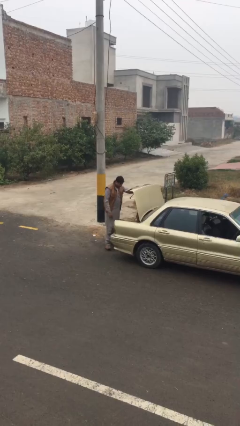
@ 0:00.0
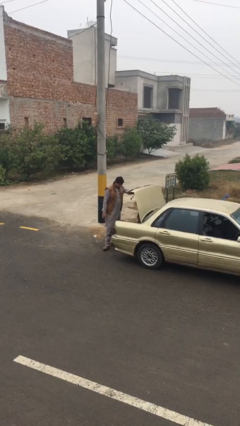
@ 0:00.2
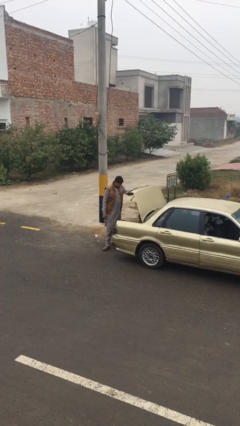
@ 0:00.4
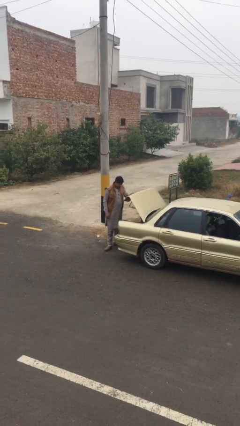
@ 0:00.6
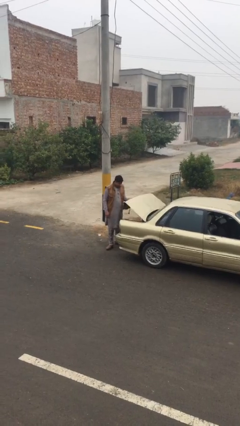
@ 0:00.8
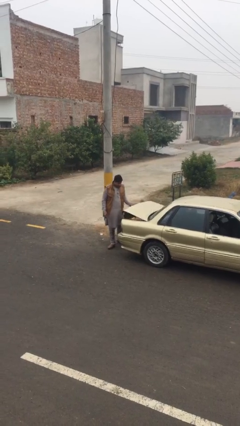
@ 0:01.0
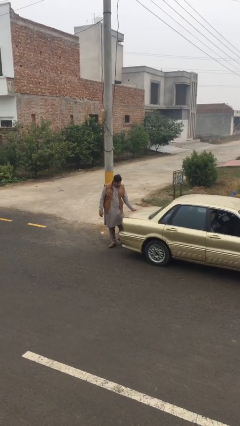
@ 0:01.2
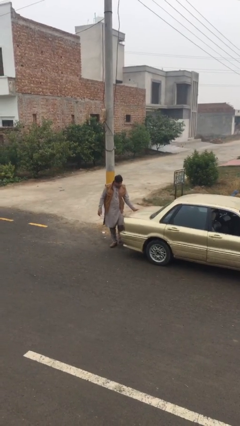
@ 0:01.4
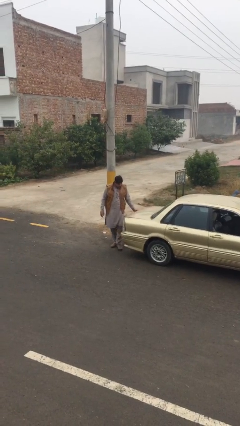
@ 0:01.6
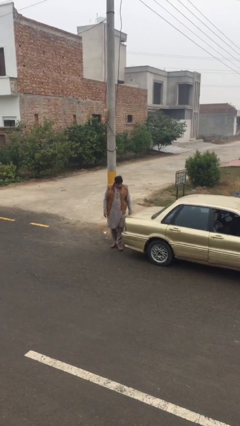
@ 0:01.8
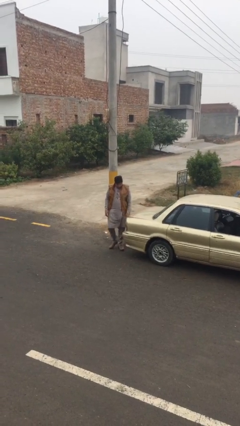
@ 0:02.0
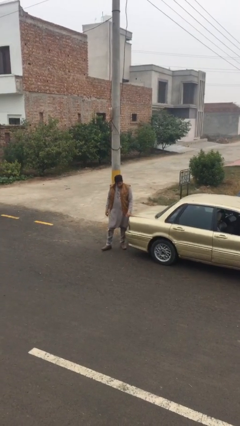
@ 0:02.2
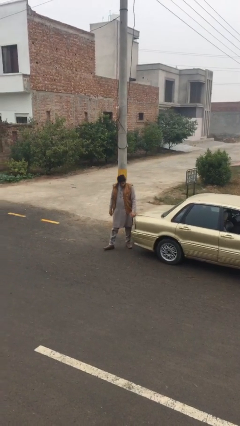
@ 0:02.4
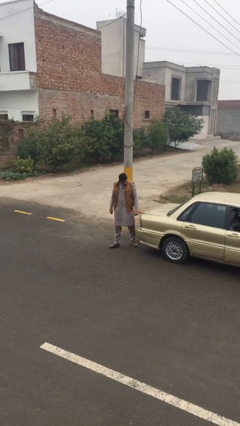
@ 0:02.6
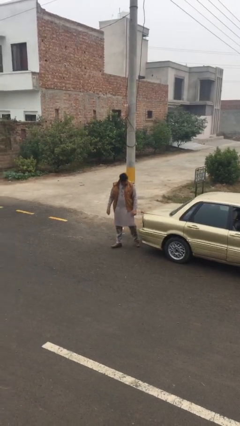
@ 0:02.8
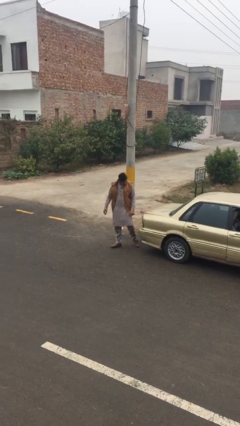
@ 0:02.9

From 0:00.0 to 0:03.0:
person closes car trunk

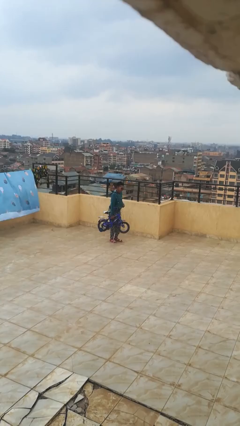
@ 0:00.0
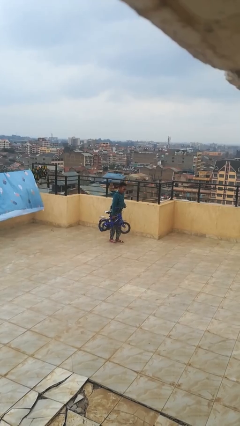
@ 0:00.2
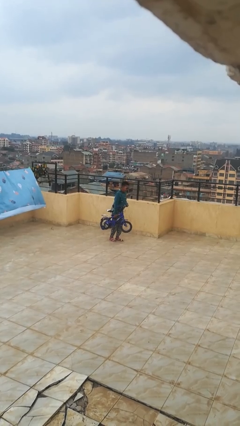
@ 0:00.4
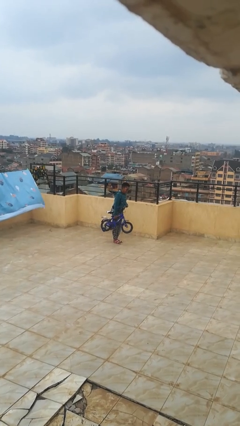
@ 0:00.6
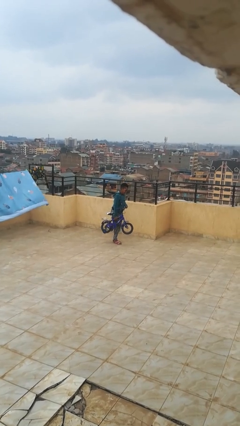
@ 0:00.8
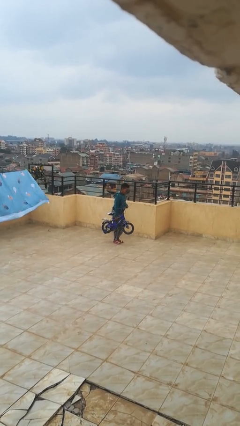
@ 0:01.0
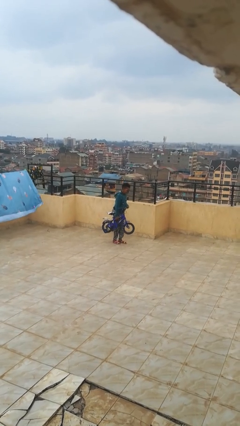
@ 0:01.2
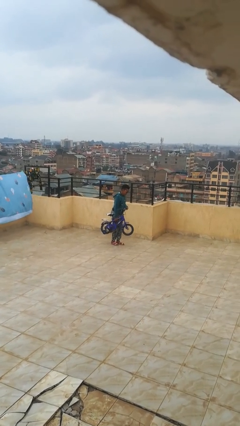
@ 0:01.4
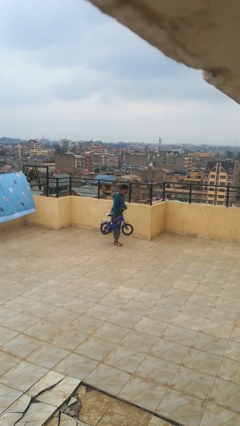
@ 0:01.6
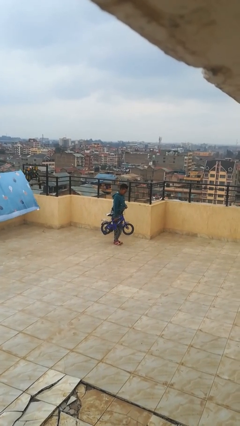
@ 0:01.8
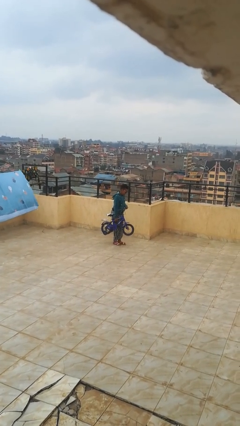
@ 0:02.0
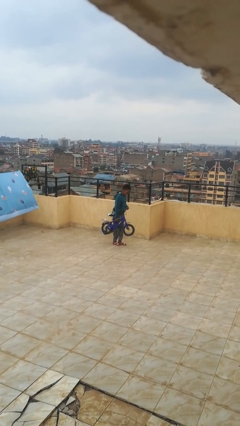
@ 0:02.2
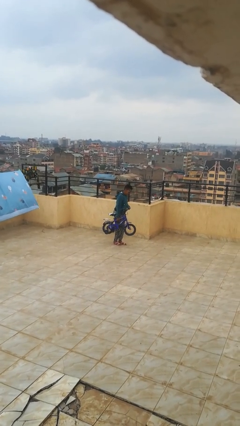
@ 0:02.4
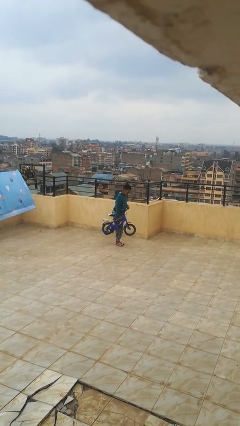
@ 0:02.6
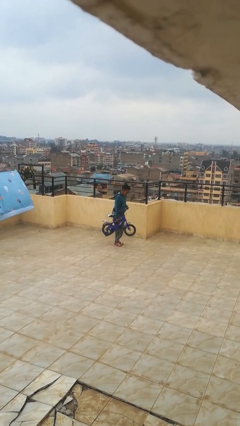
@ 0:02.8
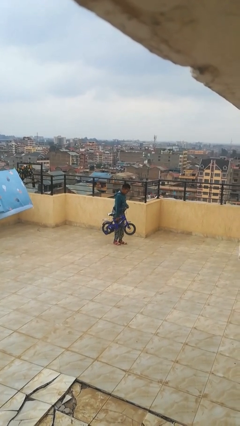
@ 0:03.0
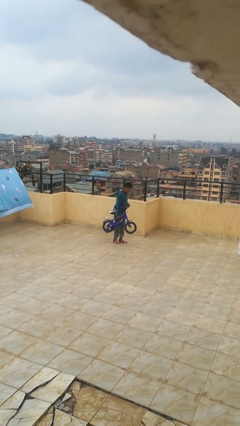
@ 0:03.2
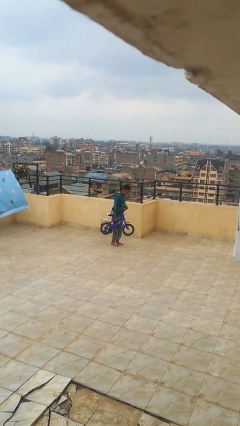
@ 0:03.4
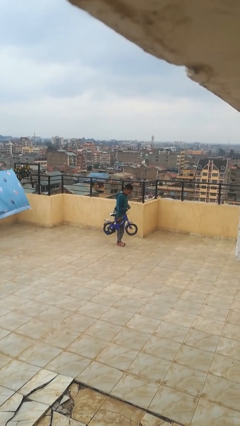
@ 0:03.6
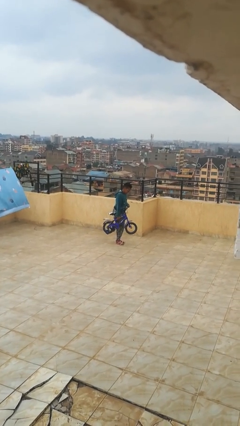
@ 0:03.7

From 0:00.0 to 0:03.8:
person carries bicycle

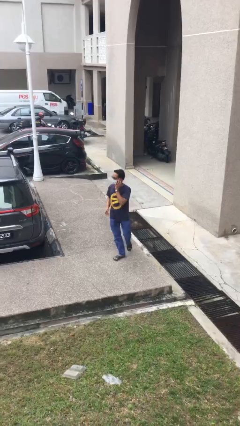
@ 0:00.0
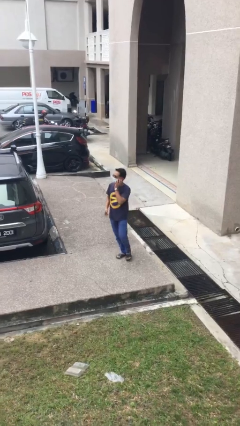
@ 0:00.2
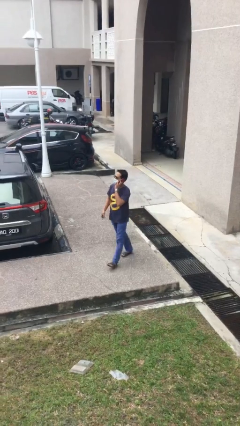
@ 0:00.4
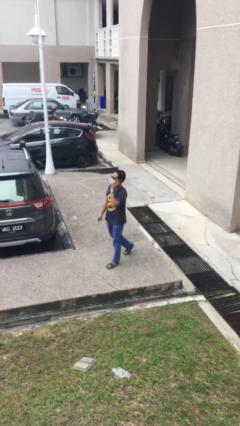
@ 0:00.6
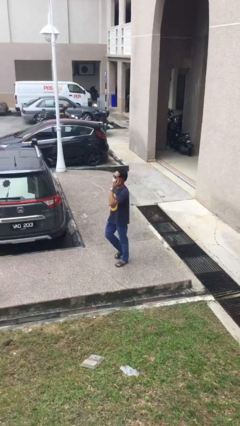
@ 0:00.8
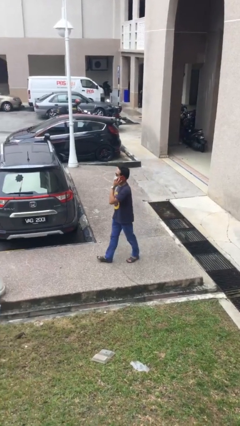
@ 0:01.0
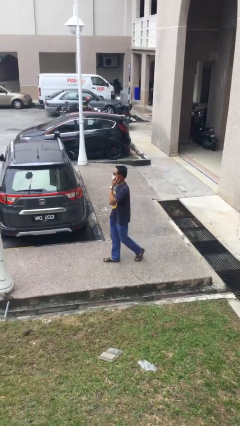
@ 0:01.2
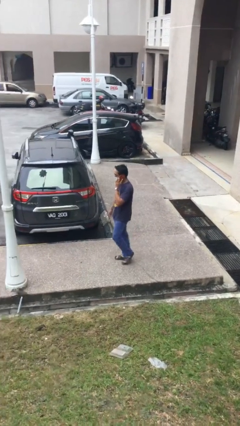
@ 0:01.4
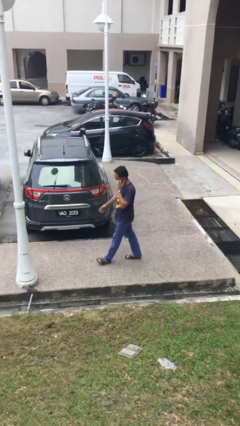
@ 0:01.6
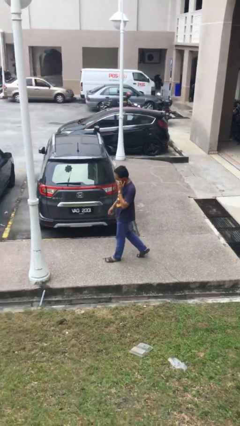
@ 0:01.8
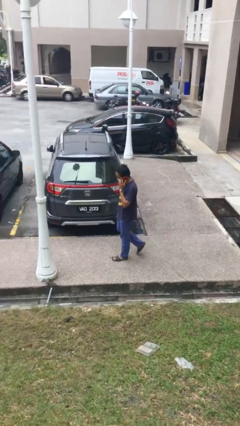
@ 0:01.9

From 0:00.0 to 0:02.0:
person talks on phone

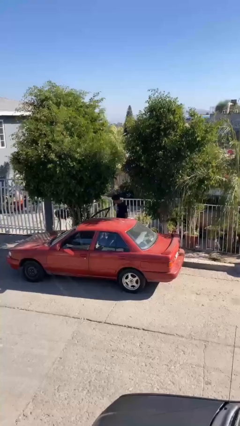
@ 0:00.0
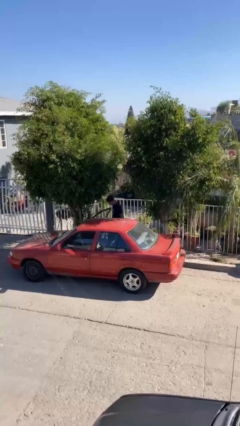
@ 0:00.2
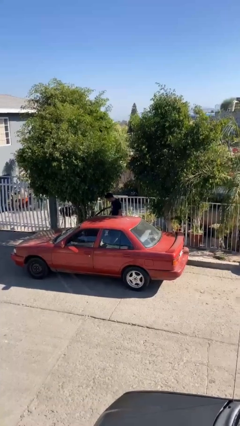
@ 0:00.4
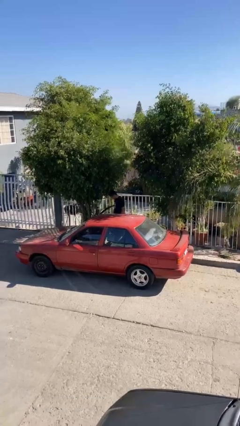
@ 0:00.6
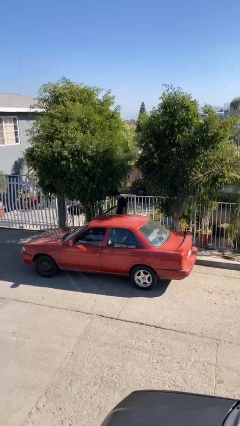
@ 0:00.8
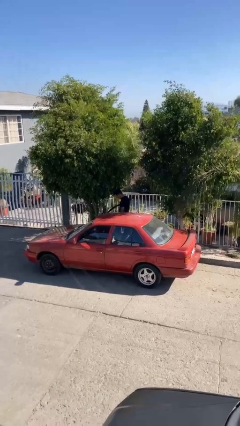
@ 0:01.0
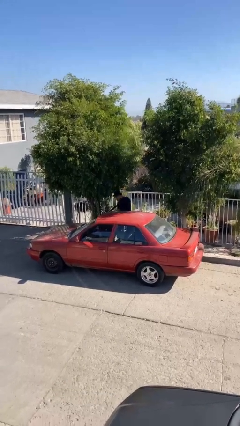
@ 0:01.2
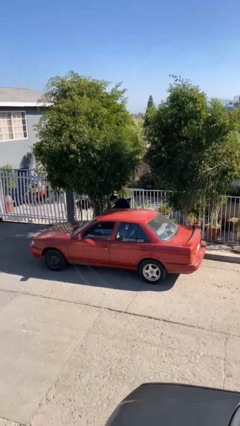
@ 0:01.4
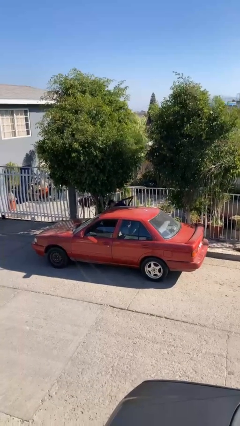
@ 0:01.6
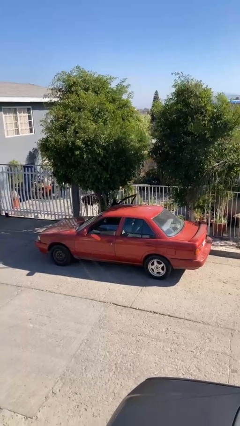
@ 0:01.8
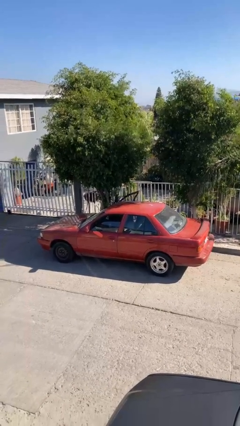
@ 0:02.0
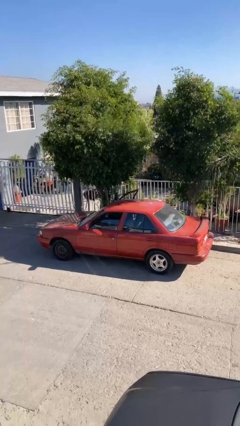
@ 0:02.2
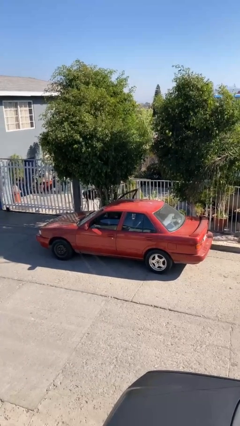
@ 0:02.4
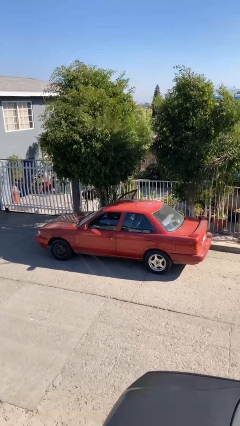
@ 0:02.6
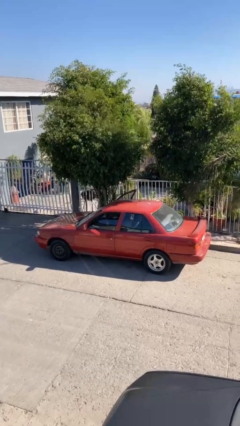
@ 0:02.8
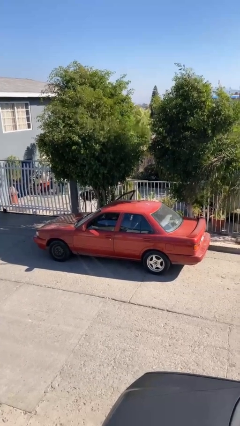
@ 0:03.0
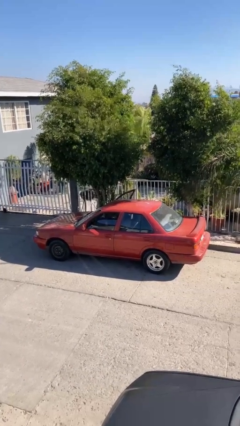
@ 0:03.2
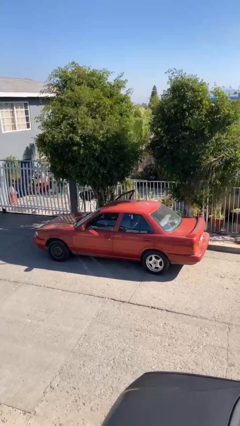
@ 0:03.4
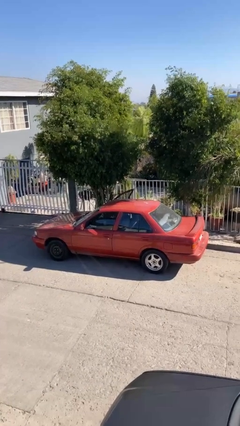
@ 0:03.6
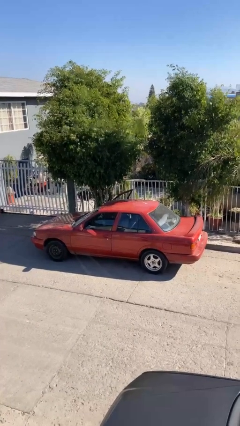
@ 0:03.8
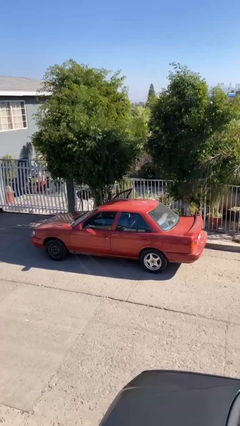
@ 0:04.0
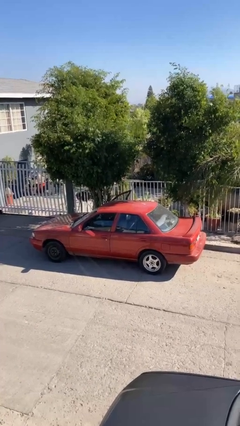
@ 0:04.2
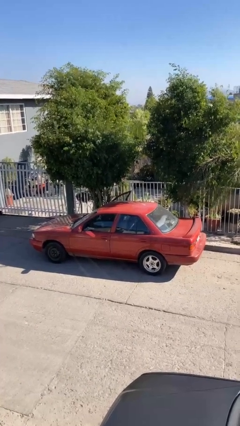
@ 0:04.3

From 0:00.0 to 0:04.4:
person enters car

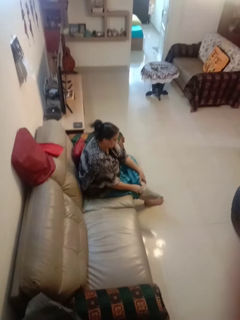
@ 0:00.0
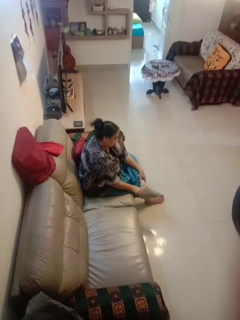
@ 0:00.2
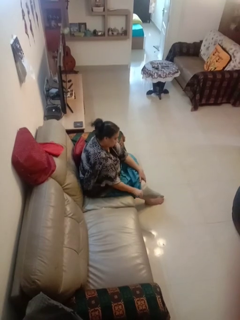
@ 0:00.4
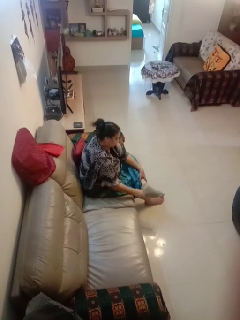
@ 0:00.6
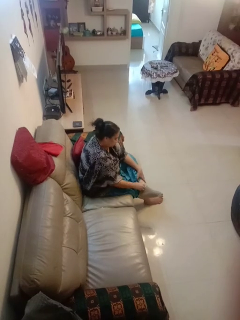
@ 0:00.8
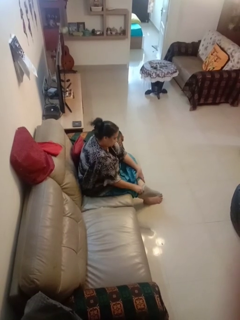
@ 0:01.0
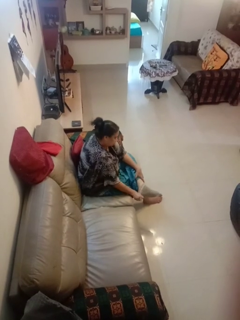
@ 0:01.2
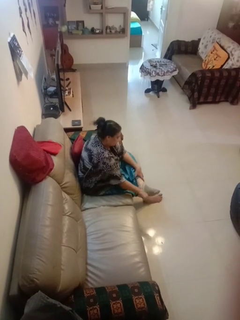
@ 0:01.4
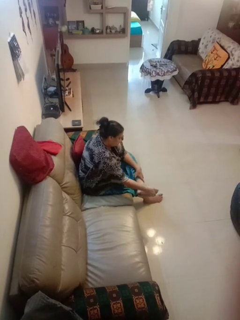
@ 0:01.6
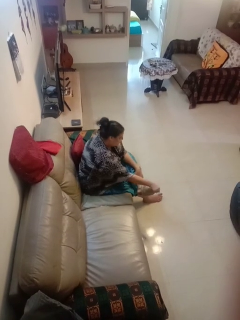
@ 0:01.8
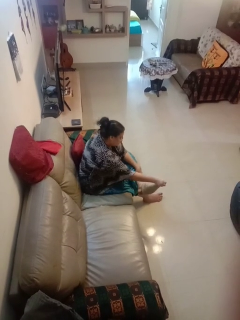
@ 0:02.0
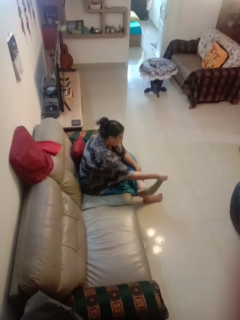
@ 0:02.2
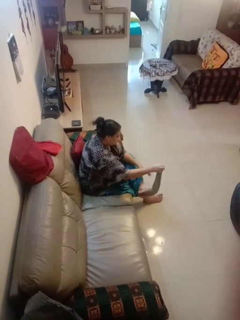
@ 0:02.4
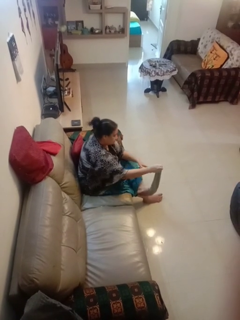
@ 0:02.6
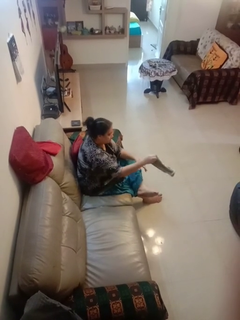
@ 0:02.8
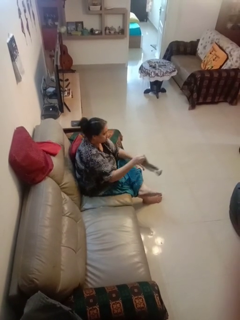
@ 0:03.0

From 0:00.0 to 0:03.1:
person takes off socks

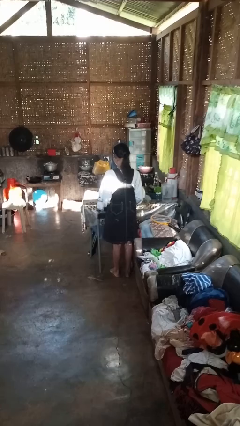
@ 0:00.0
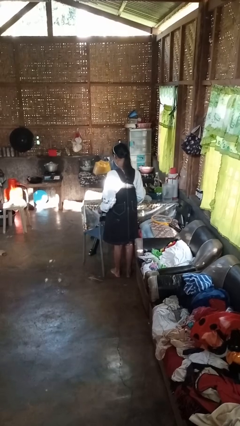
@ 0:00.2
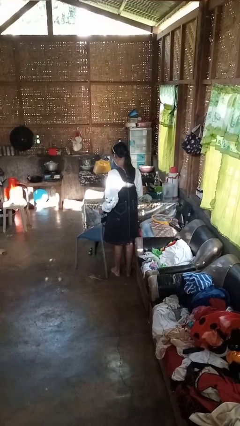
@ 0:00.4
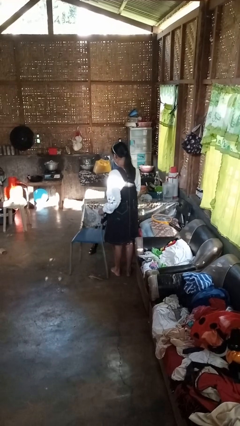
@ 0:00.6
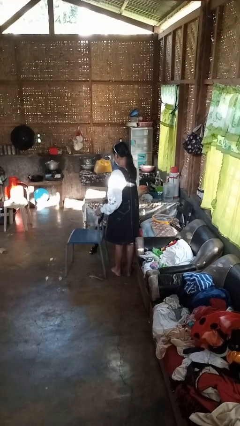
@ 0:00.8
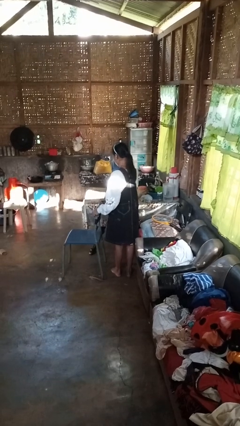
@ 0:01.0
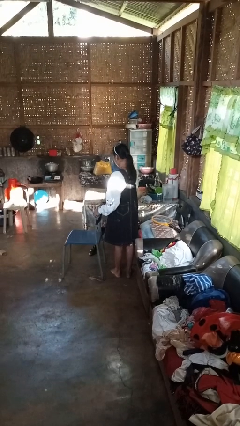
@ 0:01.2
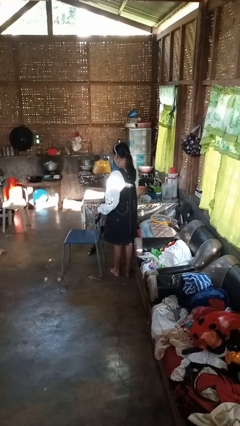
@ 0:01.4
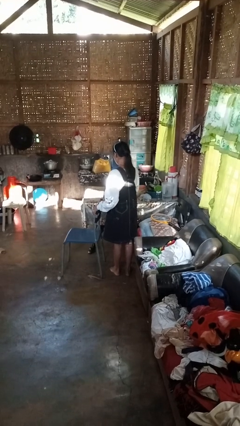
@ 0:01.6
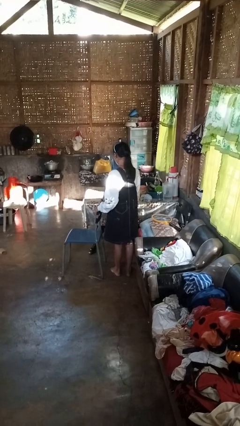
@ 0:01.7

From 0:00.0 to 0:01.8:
person pulls out chair
